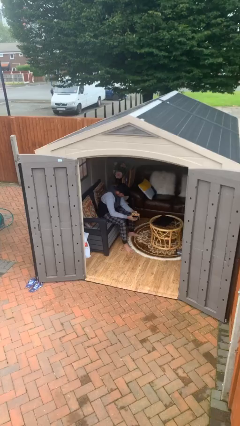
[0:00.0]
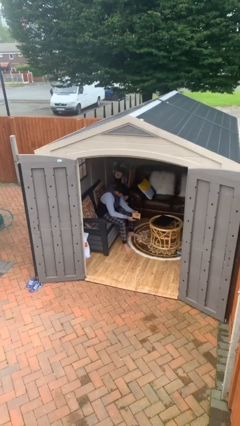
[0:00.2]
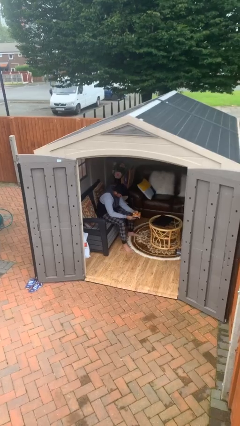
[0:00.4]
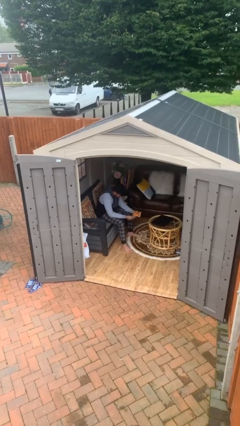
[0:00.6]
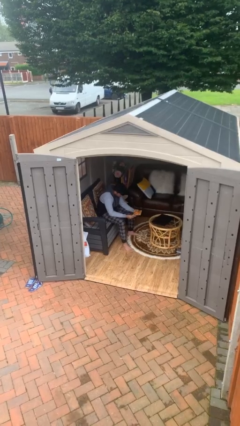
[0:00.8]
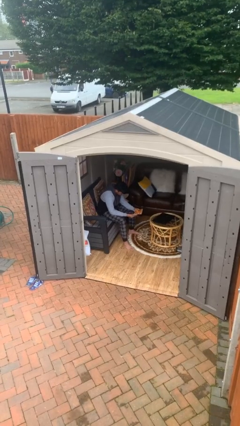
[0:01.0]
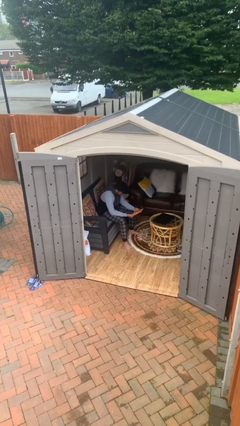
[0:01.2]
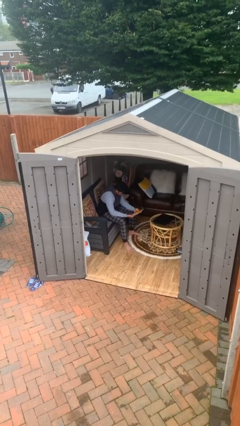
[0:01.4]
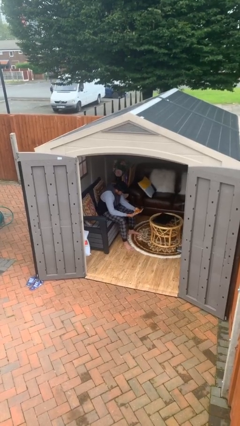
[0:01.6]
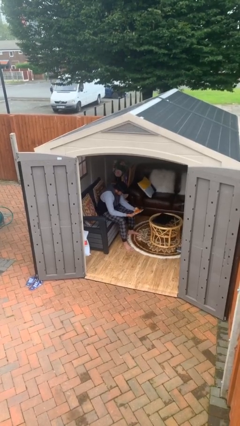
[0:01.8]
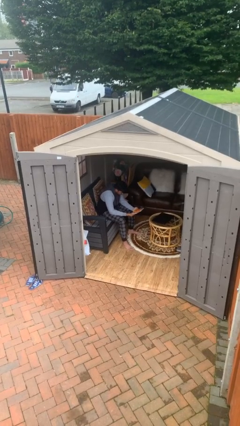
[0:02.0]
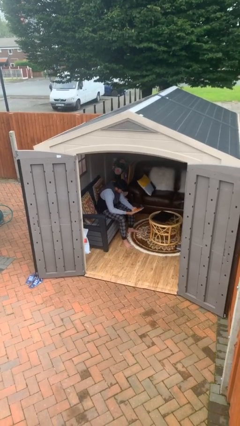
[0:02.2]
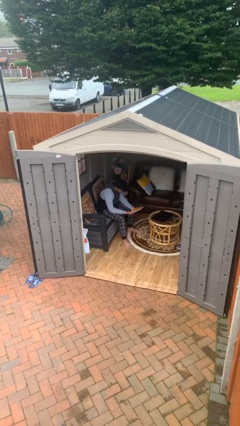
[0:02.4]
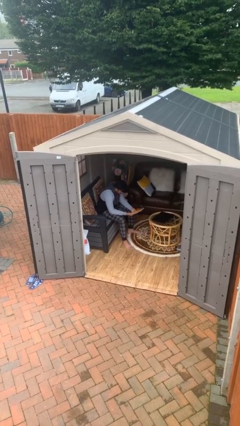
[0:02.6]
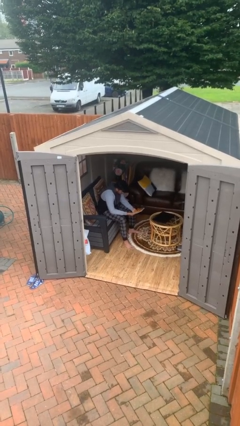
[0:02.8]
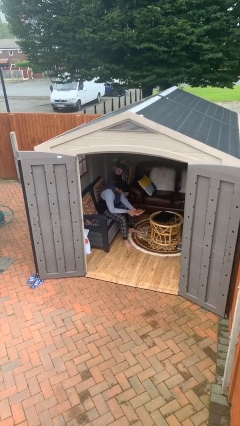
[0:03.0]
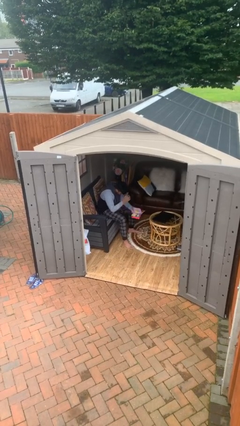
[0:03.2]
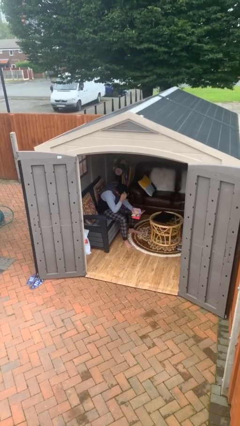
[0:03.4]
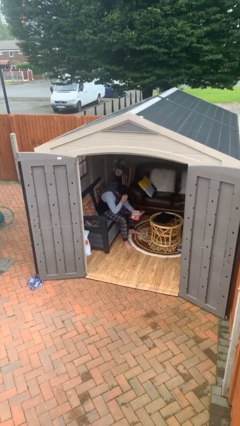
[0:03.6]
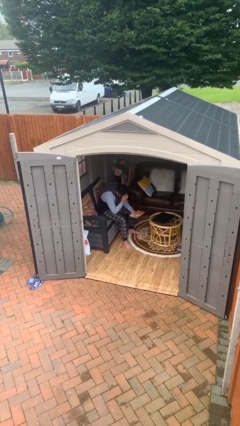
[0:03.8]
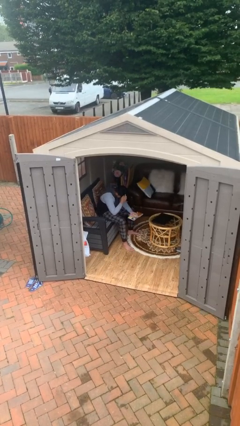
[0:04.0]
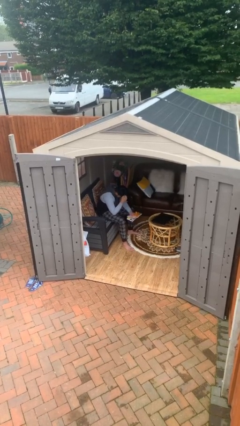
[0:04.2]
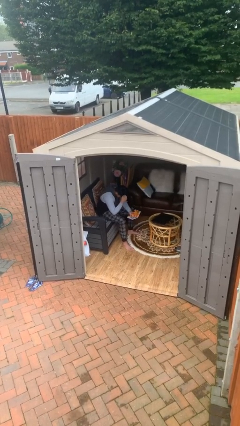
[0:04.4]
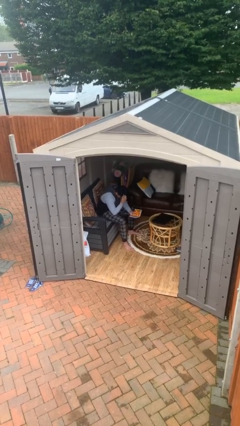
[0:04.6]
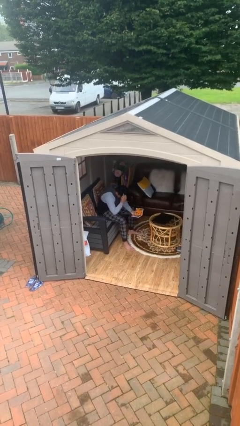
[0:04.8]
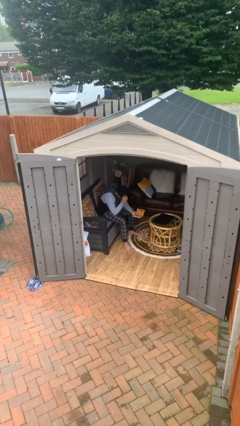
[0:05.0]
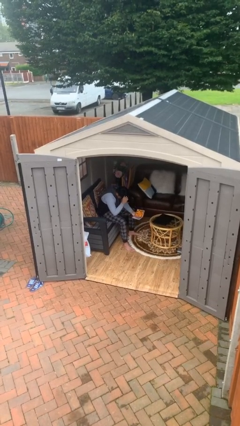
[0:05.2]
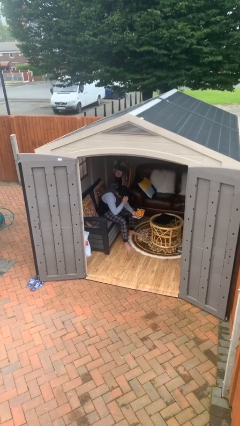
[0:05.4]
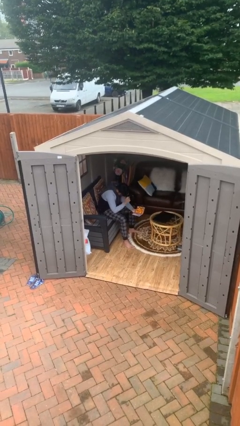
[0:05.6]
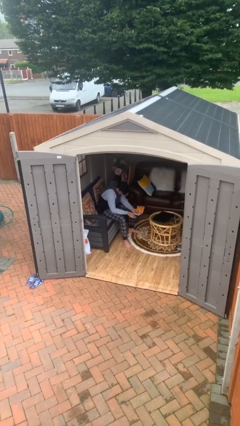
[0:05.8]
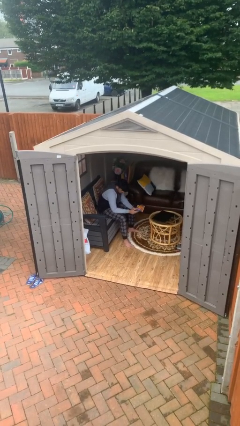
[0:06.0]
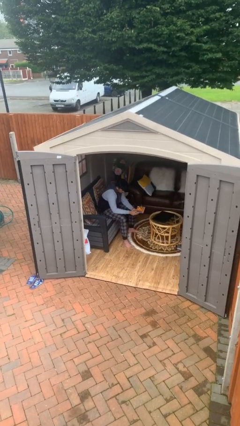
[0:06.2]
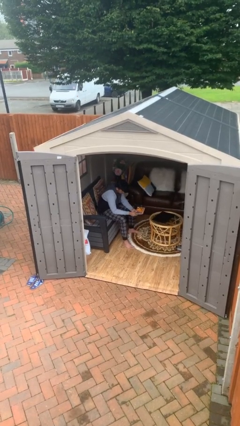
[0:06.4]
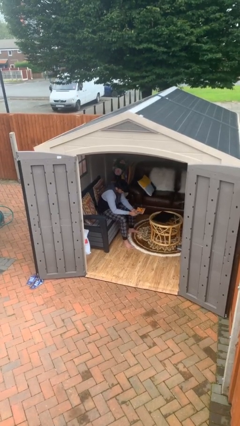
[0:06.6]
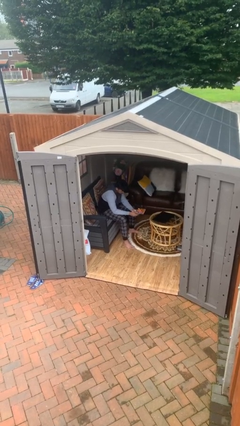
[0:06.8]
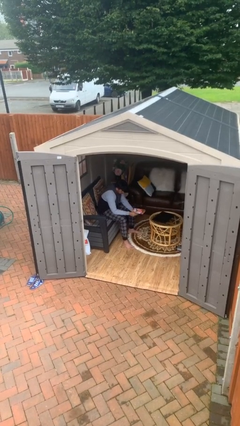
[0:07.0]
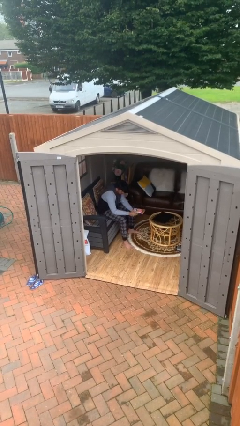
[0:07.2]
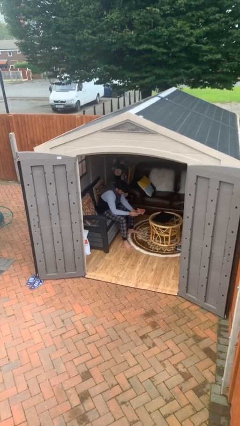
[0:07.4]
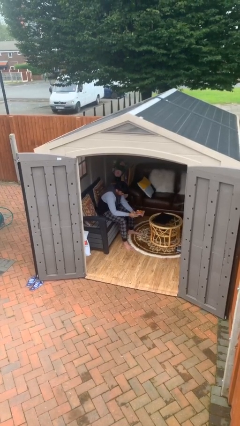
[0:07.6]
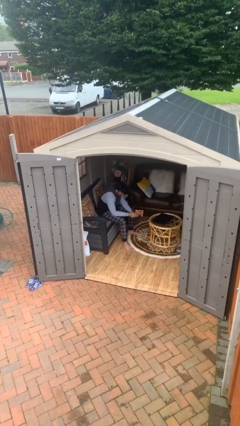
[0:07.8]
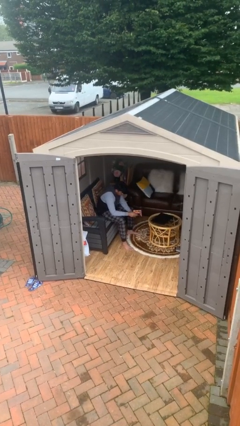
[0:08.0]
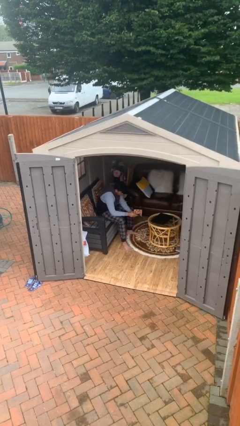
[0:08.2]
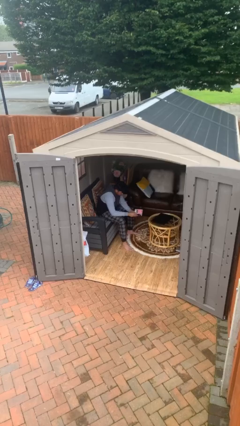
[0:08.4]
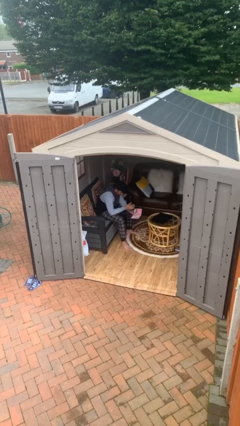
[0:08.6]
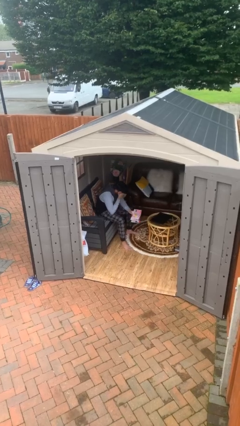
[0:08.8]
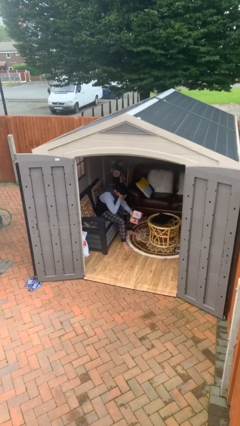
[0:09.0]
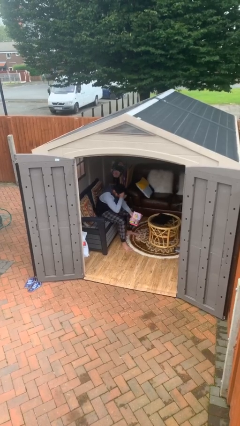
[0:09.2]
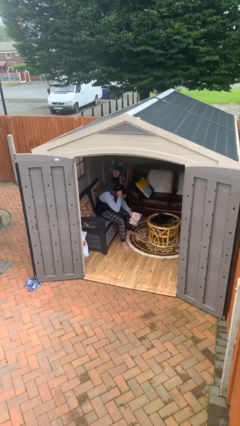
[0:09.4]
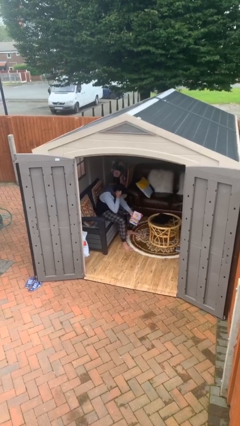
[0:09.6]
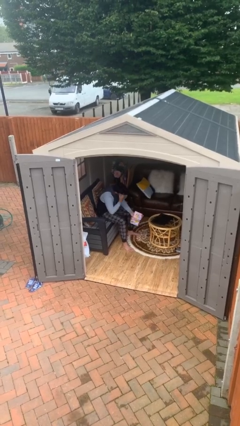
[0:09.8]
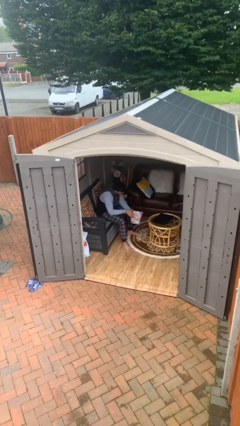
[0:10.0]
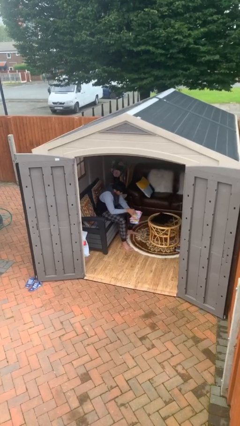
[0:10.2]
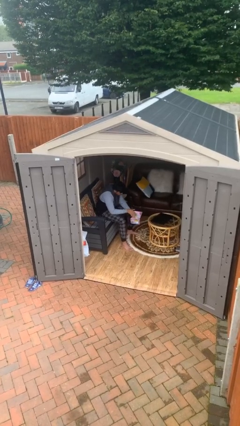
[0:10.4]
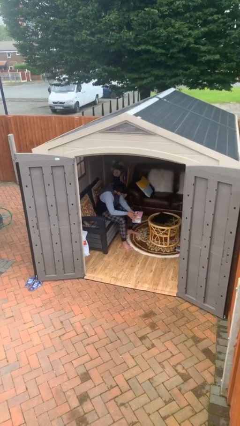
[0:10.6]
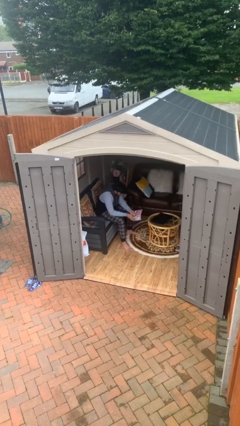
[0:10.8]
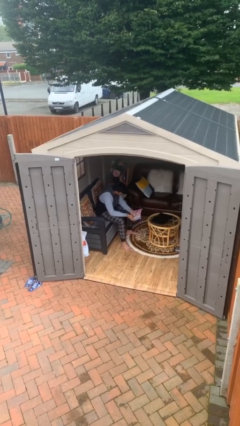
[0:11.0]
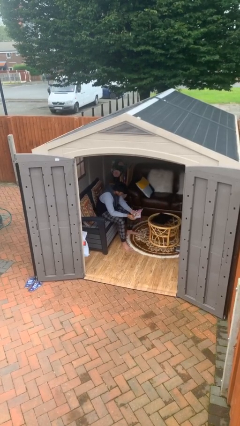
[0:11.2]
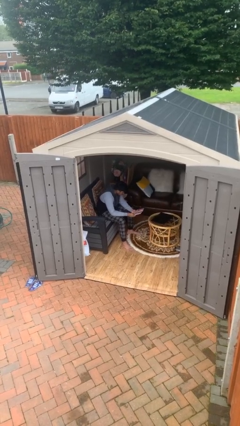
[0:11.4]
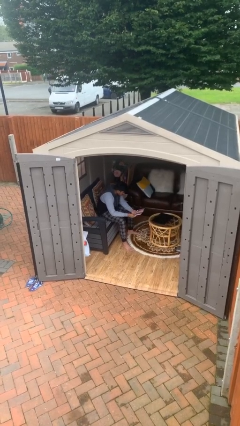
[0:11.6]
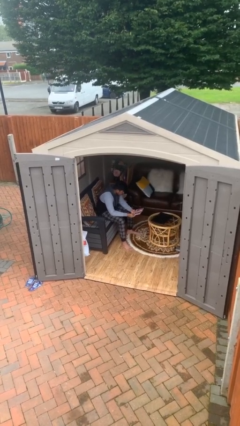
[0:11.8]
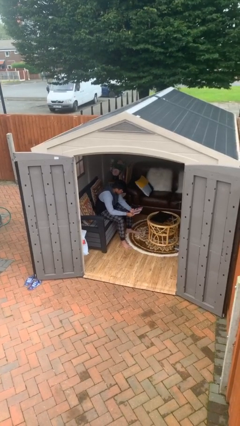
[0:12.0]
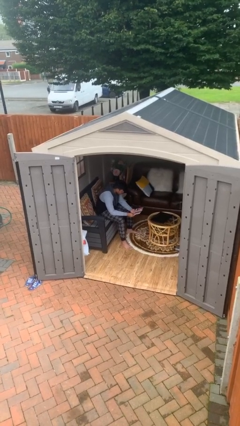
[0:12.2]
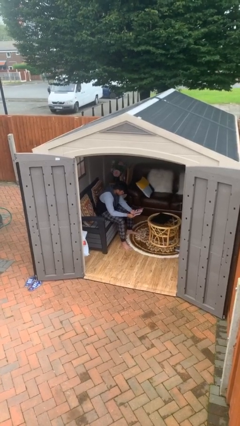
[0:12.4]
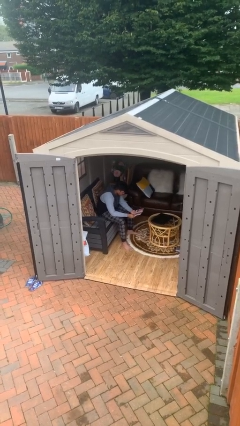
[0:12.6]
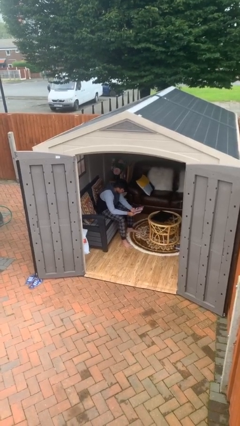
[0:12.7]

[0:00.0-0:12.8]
person reads document

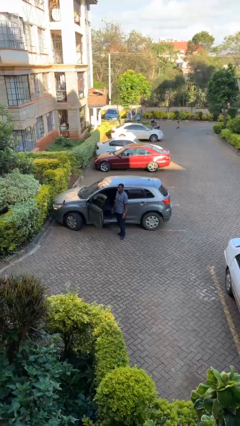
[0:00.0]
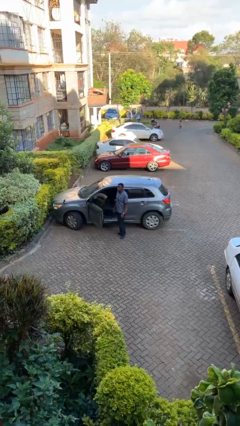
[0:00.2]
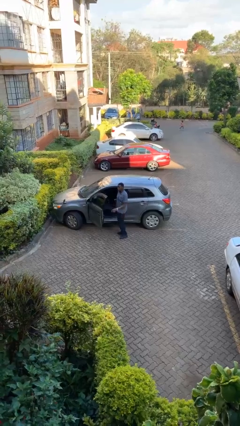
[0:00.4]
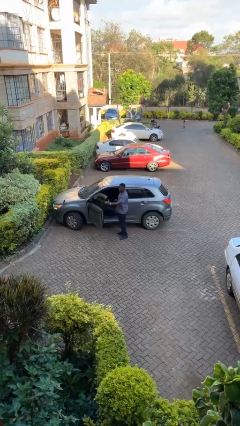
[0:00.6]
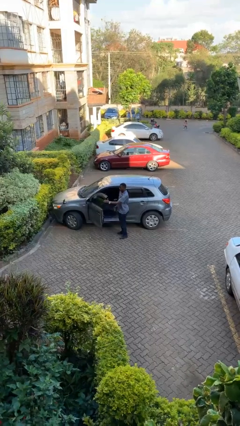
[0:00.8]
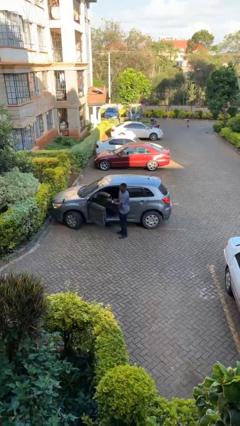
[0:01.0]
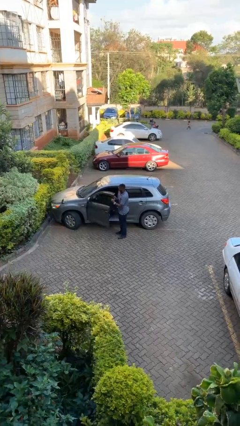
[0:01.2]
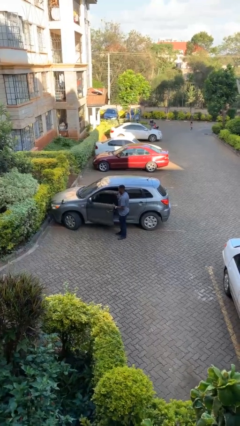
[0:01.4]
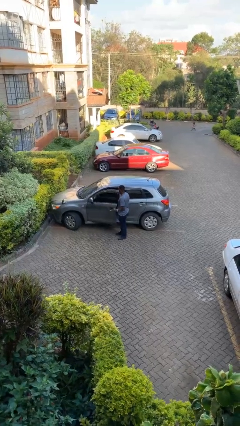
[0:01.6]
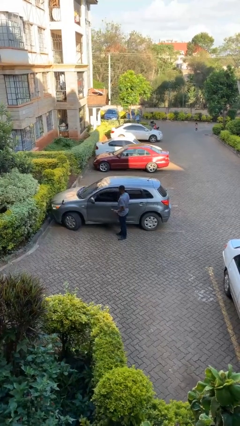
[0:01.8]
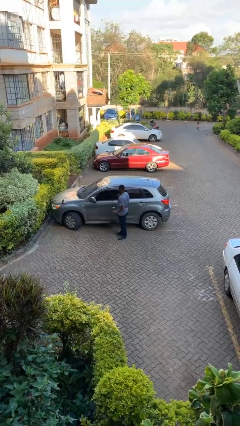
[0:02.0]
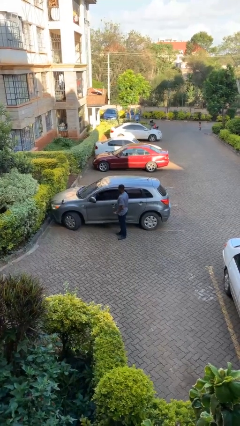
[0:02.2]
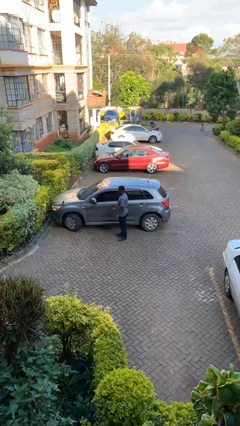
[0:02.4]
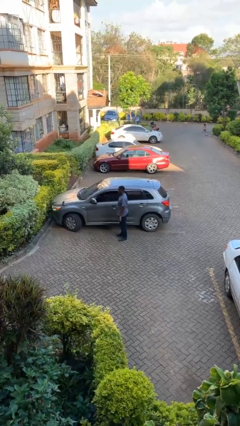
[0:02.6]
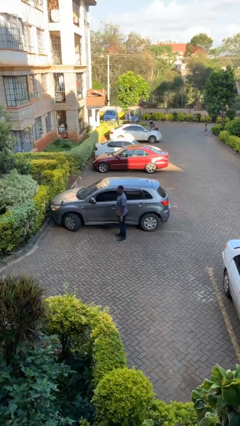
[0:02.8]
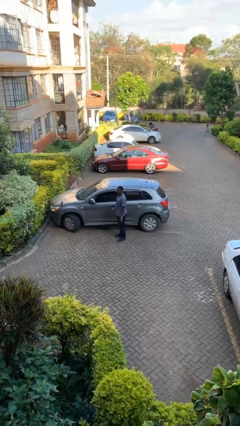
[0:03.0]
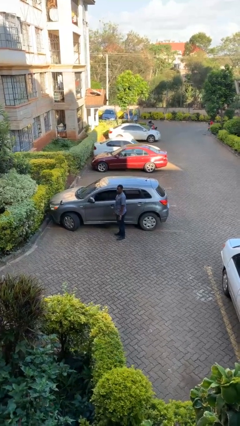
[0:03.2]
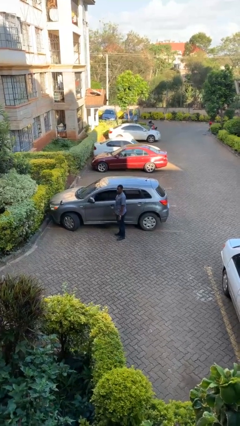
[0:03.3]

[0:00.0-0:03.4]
person closes car door

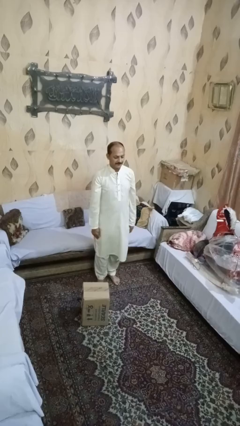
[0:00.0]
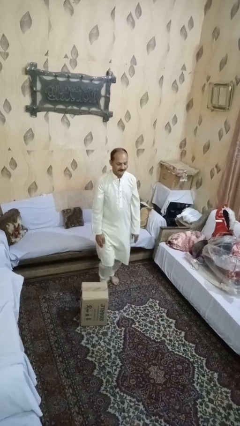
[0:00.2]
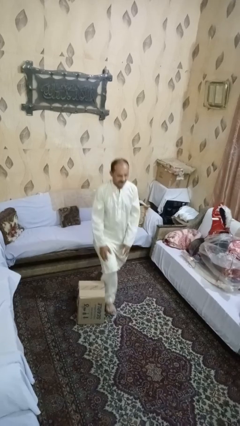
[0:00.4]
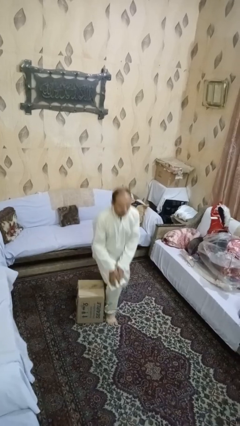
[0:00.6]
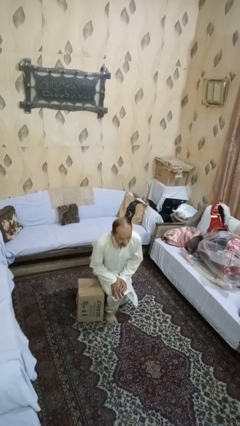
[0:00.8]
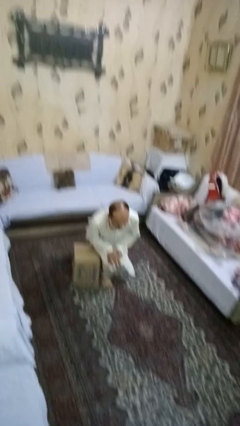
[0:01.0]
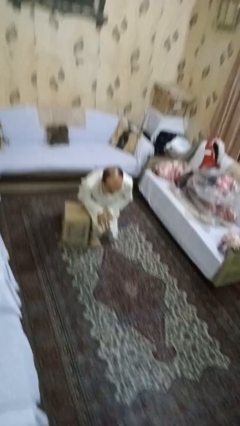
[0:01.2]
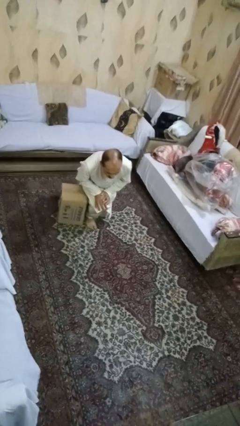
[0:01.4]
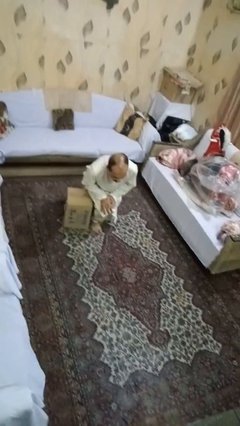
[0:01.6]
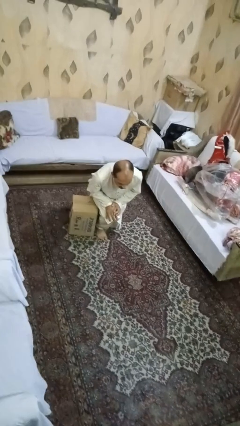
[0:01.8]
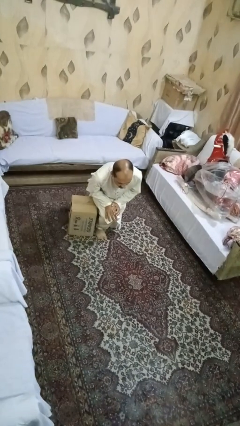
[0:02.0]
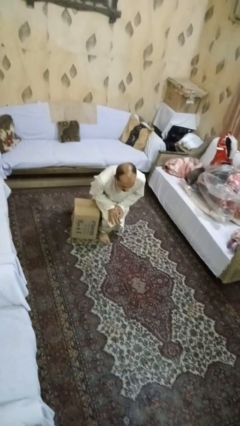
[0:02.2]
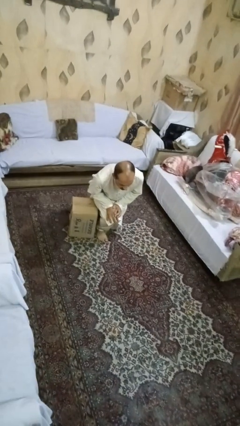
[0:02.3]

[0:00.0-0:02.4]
person trips on object on floor
